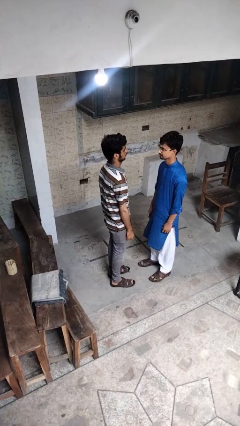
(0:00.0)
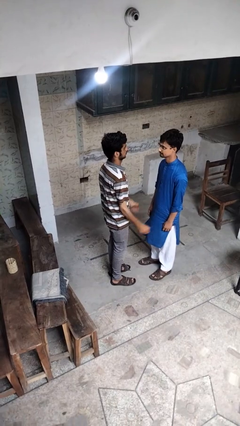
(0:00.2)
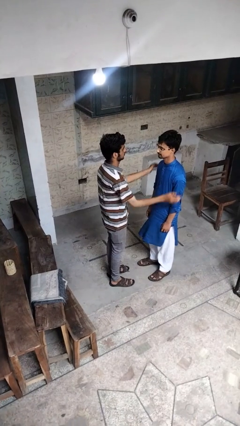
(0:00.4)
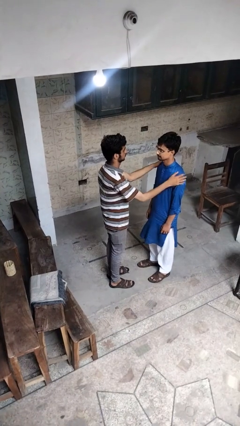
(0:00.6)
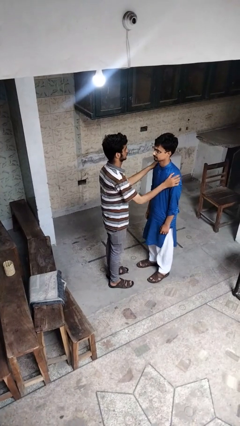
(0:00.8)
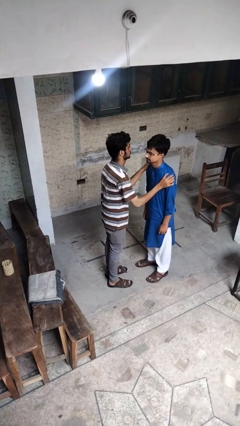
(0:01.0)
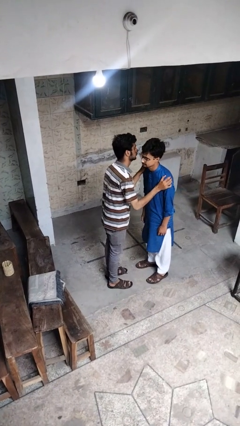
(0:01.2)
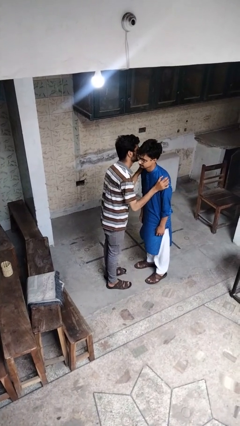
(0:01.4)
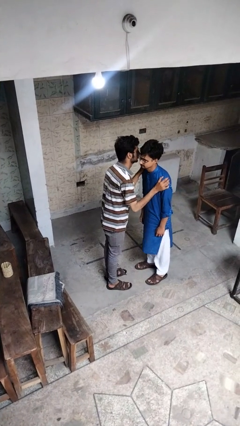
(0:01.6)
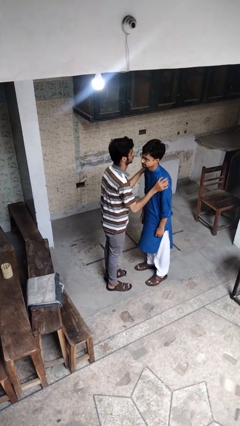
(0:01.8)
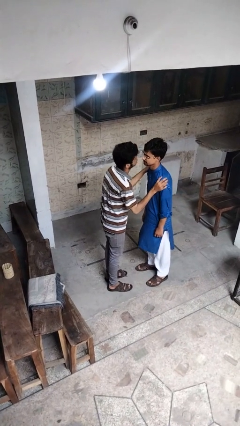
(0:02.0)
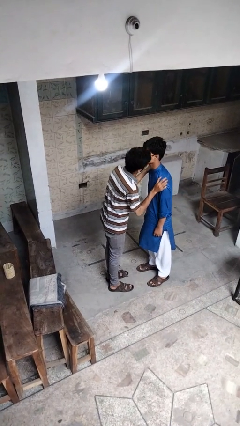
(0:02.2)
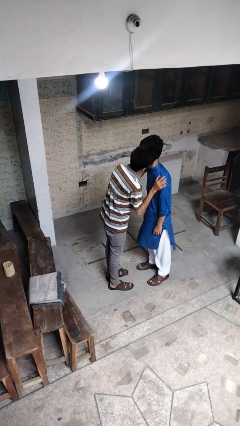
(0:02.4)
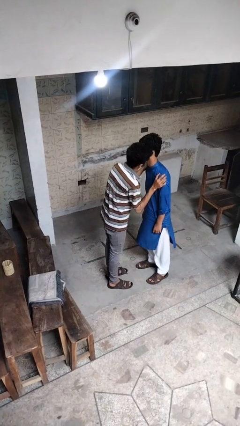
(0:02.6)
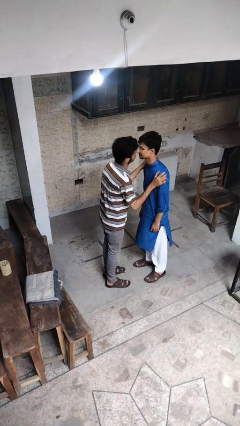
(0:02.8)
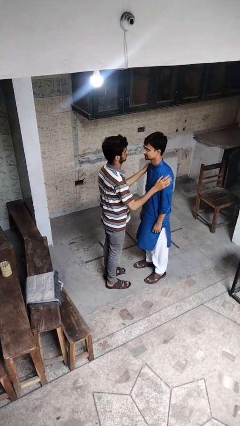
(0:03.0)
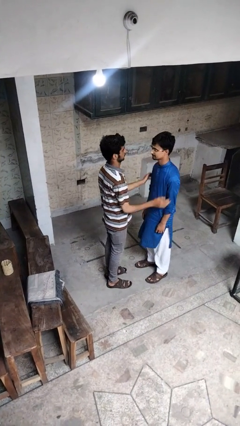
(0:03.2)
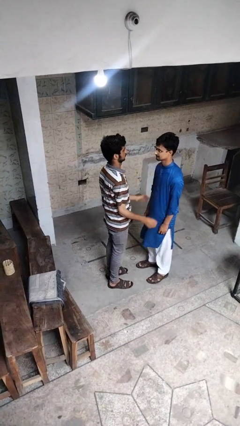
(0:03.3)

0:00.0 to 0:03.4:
person kisses cheek of person

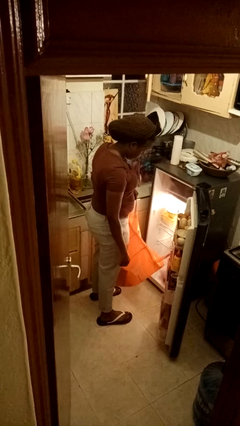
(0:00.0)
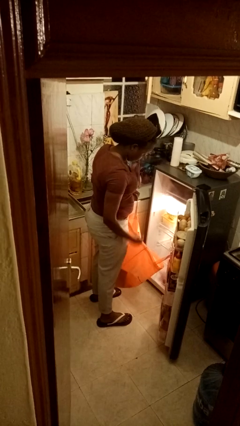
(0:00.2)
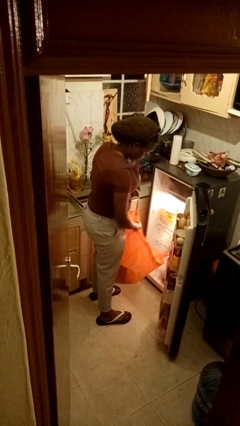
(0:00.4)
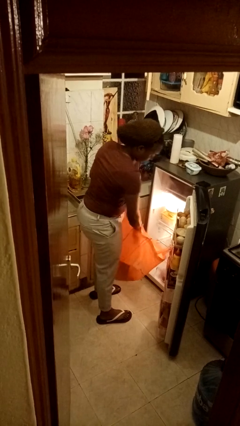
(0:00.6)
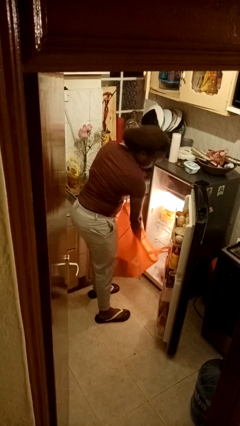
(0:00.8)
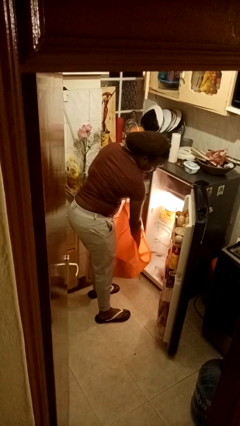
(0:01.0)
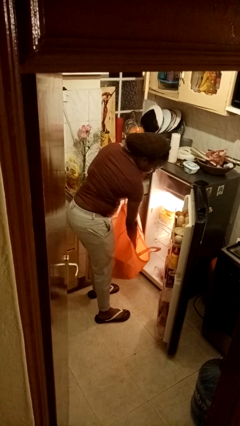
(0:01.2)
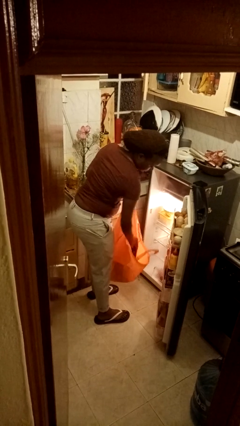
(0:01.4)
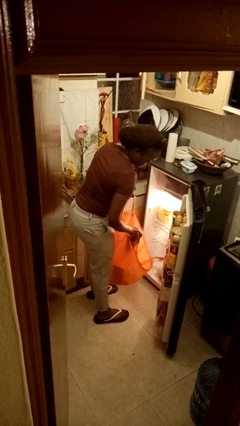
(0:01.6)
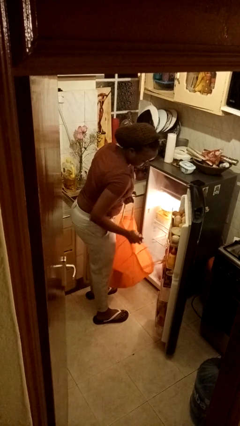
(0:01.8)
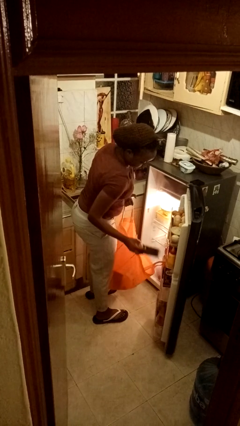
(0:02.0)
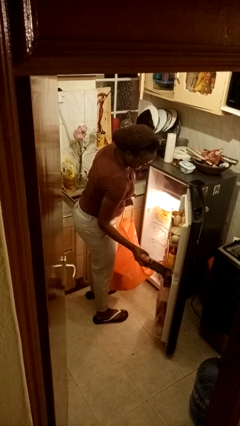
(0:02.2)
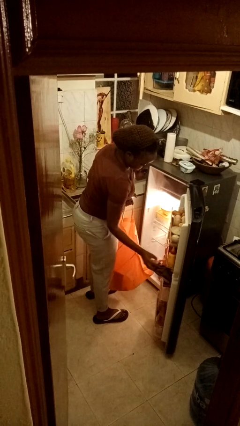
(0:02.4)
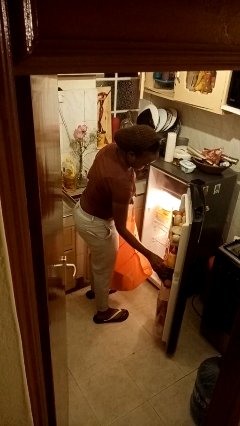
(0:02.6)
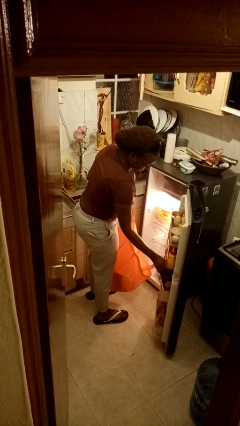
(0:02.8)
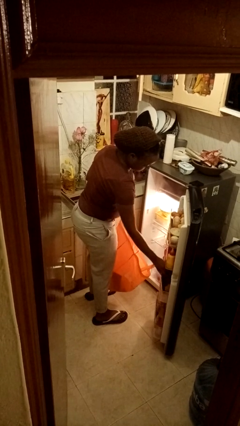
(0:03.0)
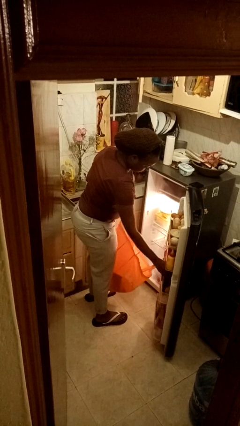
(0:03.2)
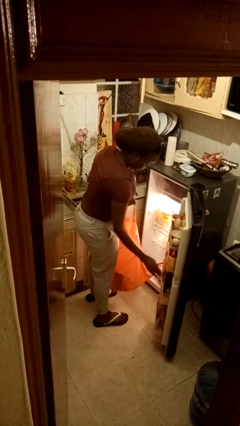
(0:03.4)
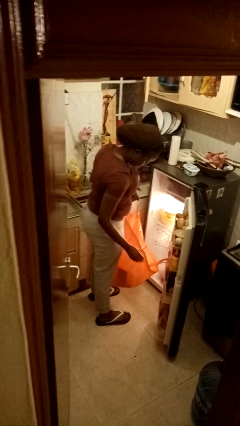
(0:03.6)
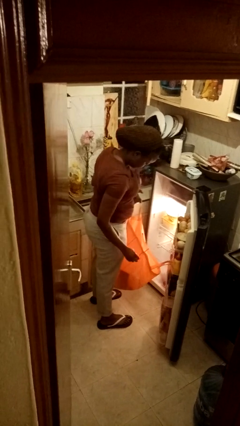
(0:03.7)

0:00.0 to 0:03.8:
person loads groceries into refrigerator

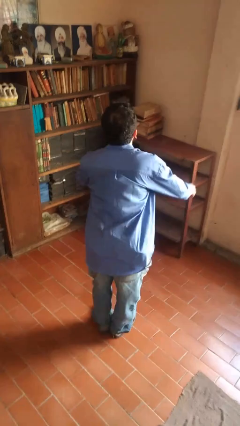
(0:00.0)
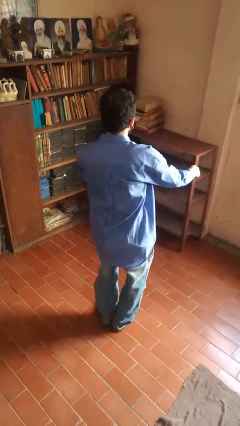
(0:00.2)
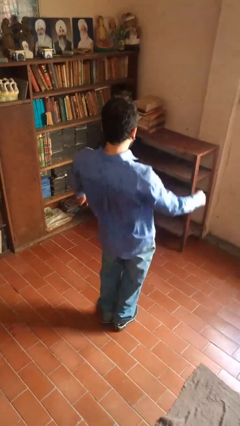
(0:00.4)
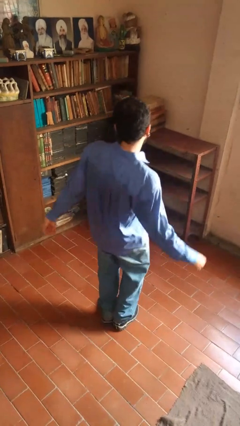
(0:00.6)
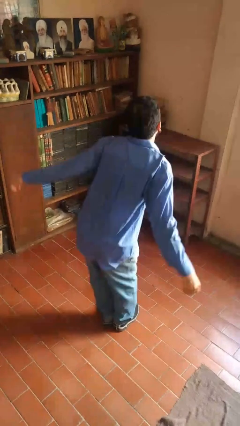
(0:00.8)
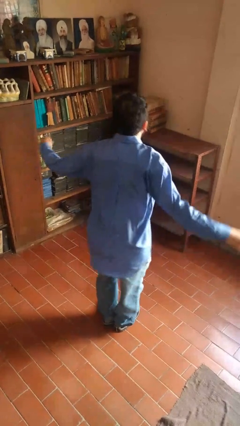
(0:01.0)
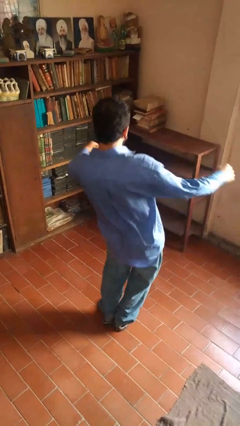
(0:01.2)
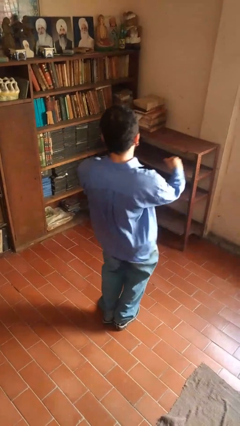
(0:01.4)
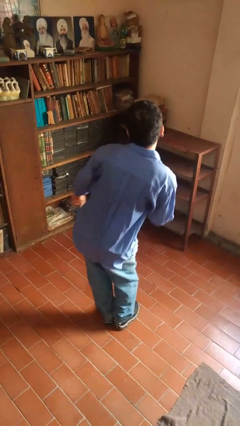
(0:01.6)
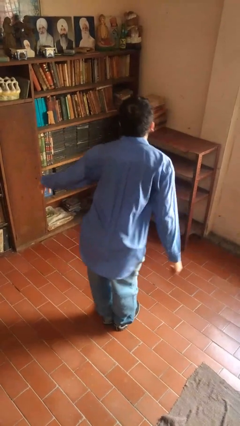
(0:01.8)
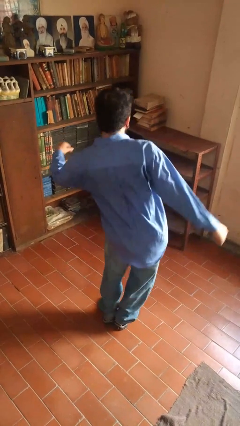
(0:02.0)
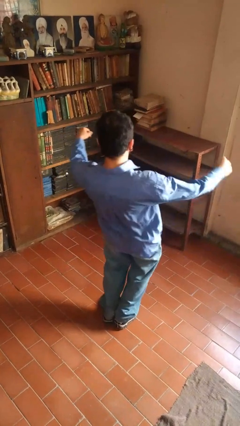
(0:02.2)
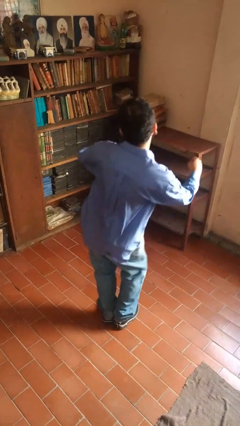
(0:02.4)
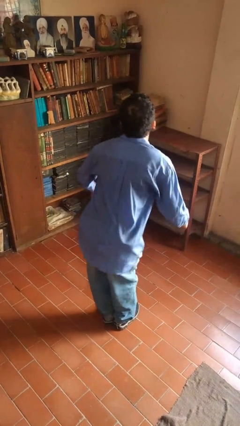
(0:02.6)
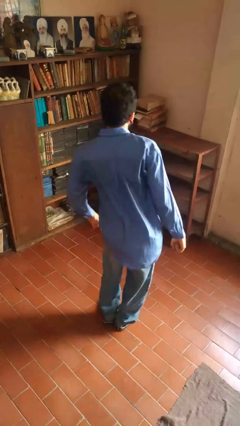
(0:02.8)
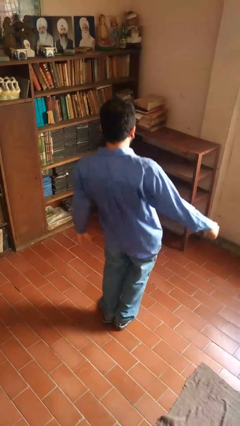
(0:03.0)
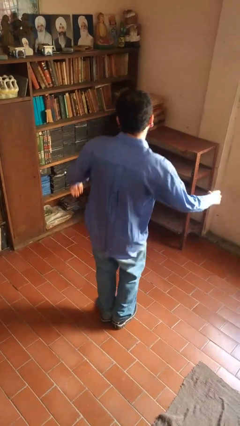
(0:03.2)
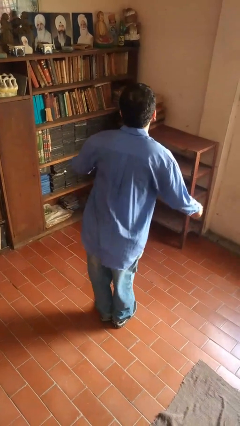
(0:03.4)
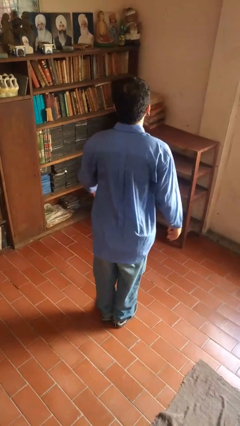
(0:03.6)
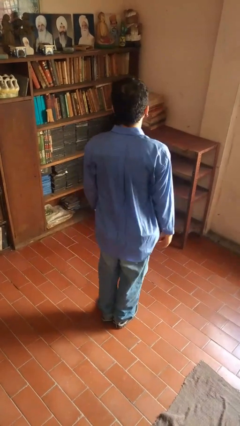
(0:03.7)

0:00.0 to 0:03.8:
person wiggles hips

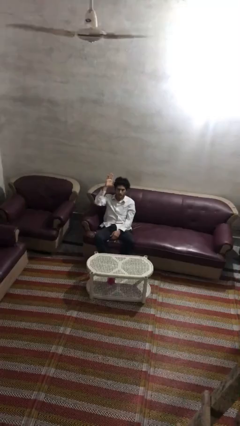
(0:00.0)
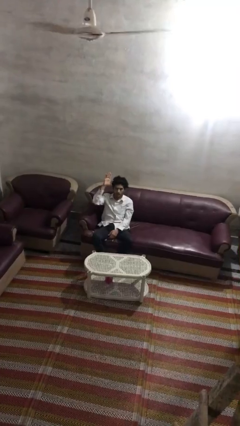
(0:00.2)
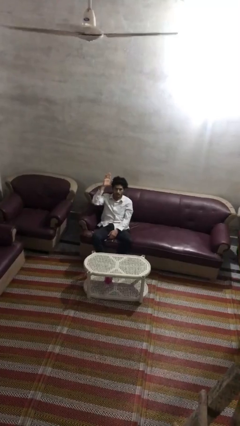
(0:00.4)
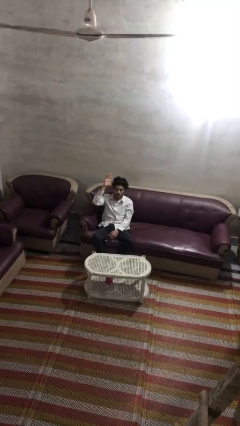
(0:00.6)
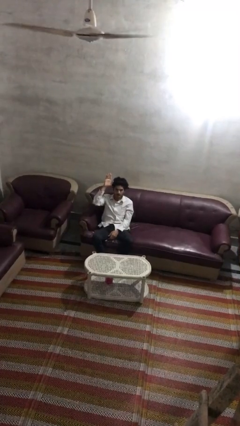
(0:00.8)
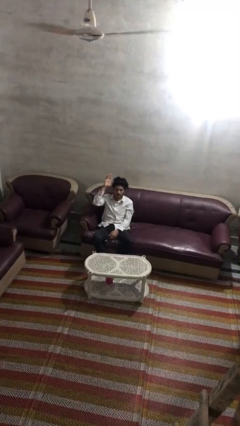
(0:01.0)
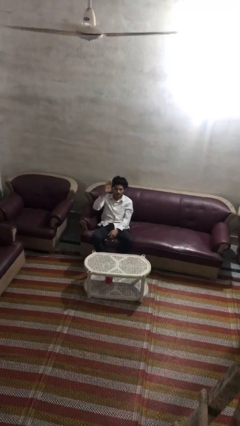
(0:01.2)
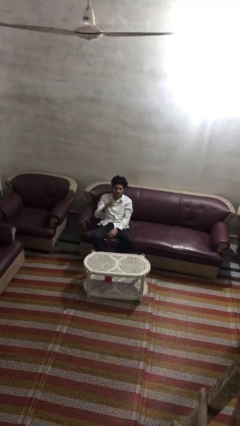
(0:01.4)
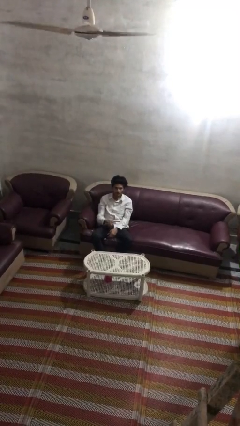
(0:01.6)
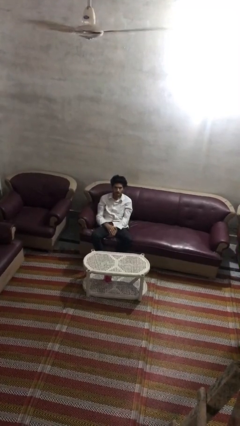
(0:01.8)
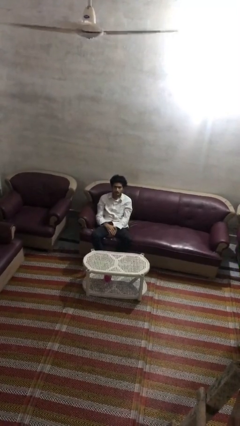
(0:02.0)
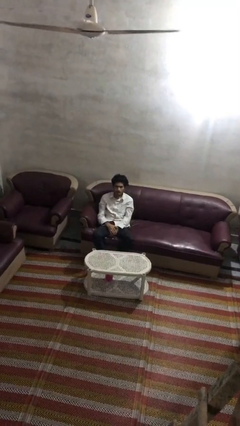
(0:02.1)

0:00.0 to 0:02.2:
person gestures lower hand

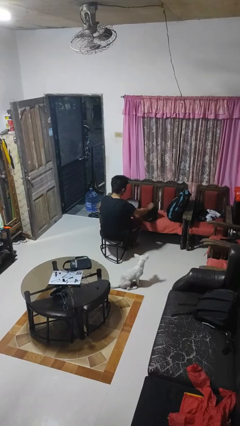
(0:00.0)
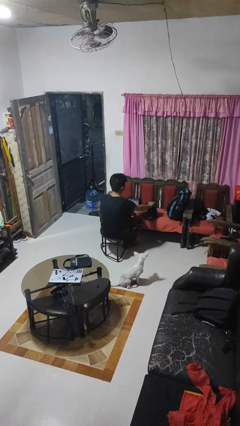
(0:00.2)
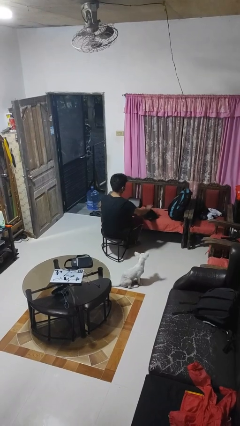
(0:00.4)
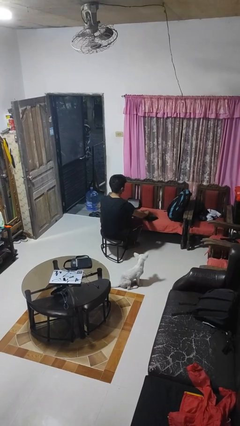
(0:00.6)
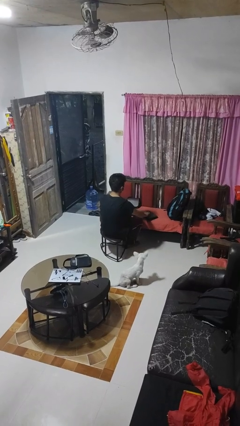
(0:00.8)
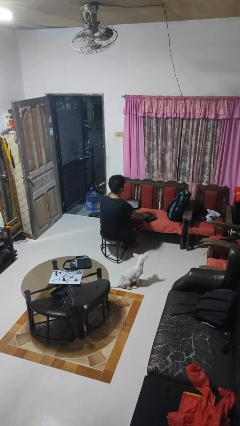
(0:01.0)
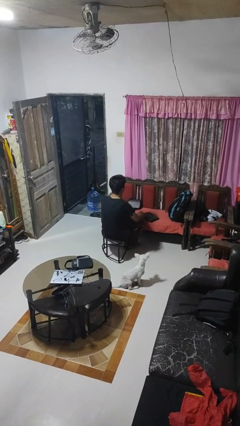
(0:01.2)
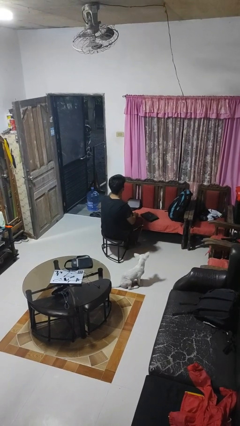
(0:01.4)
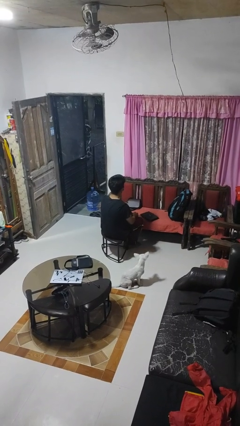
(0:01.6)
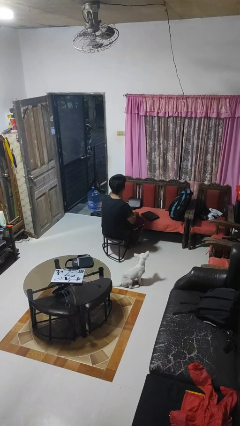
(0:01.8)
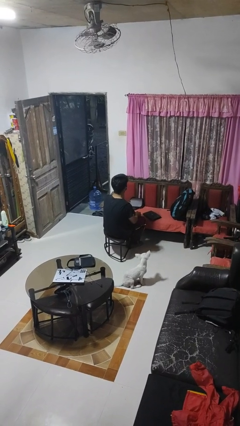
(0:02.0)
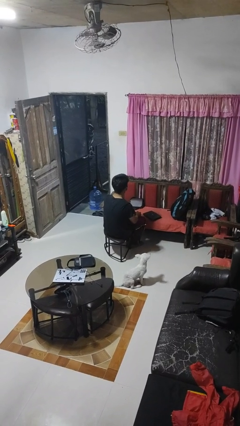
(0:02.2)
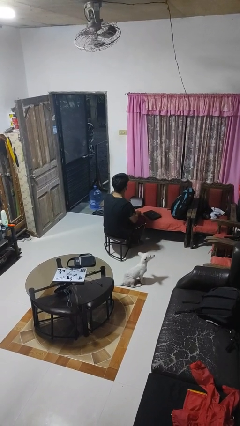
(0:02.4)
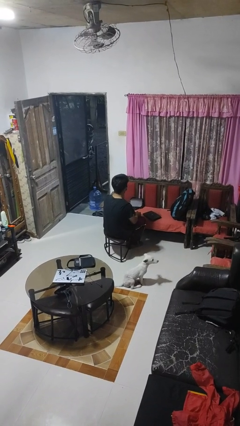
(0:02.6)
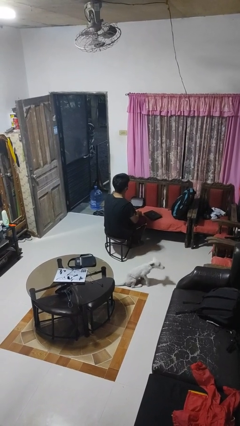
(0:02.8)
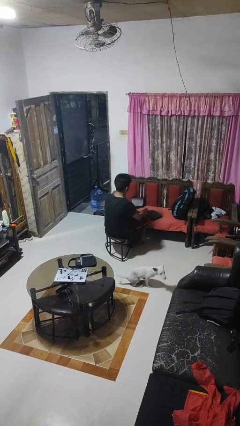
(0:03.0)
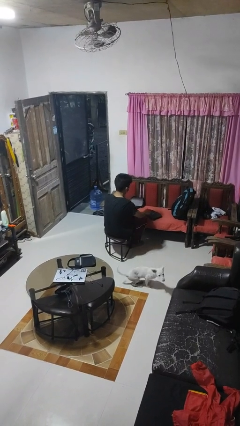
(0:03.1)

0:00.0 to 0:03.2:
person closes laptop

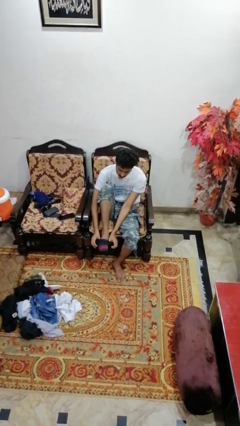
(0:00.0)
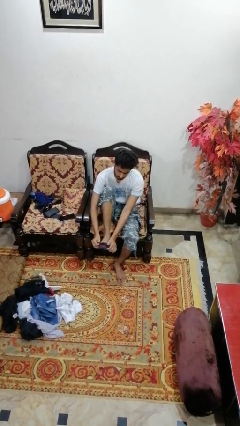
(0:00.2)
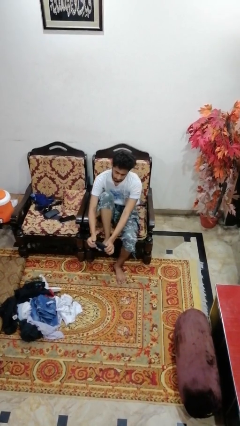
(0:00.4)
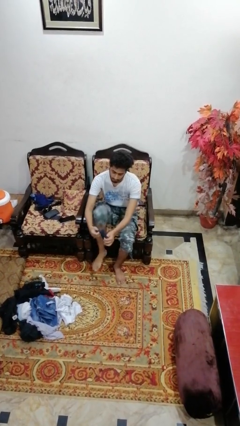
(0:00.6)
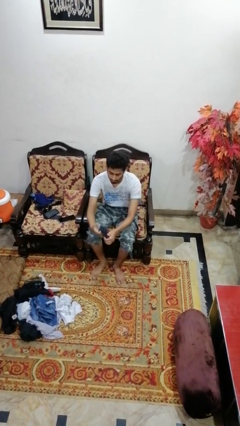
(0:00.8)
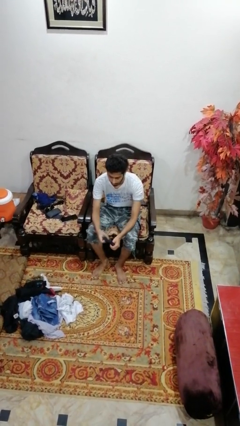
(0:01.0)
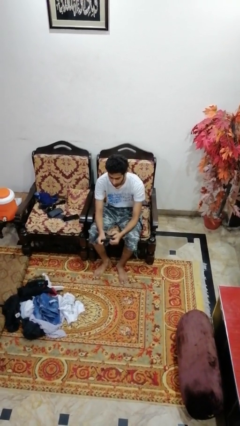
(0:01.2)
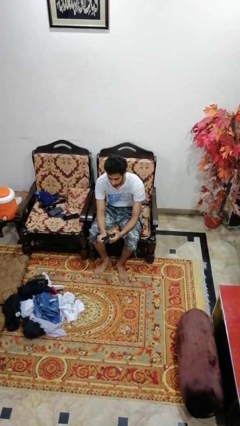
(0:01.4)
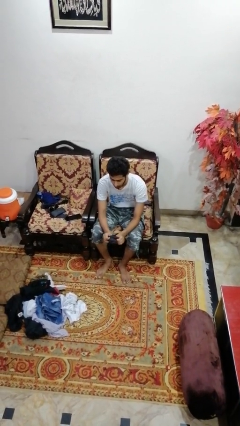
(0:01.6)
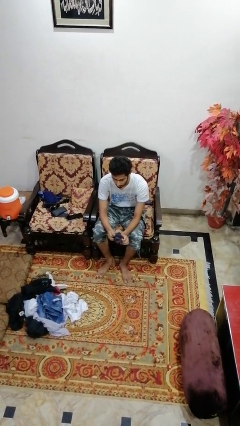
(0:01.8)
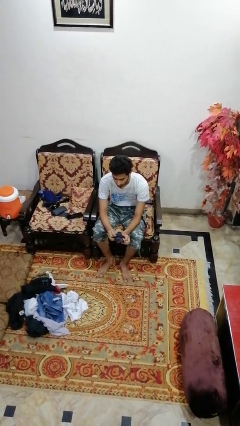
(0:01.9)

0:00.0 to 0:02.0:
person takes off socks
